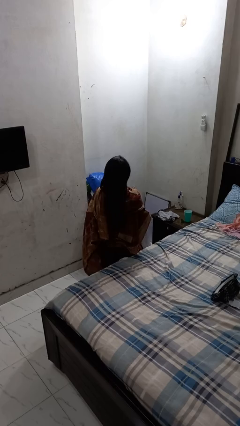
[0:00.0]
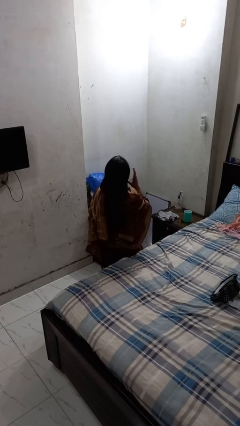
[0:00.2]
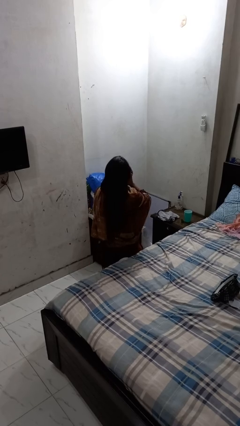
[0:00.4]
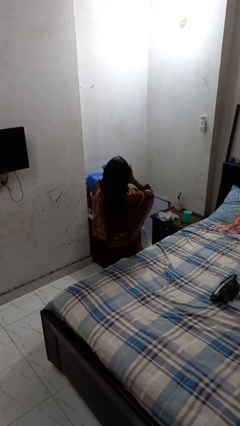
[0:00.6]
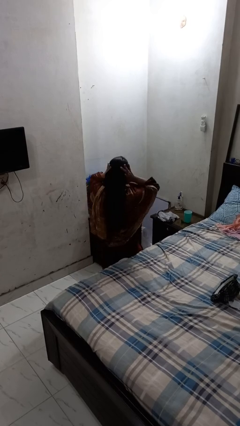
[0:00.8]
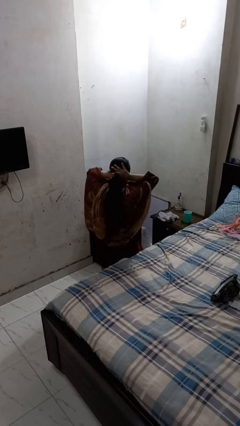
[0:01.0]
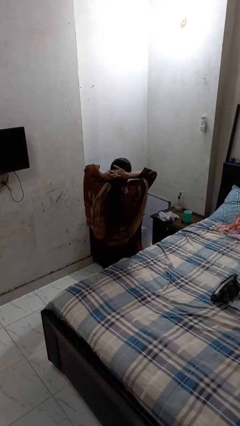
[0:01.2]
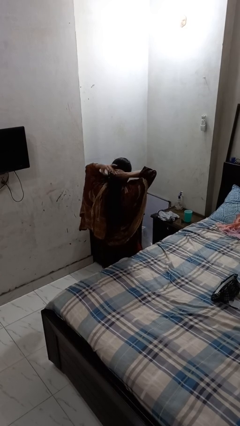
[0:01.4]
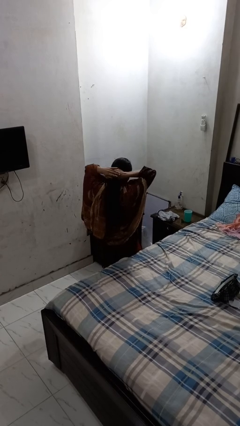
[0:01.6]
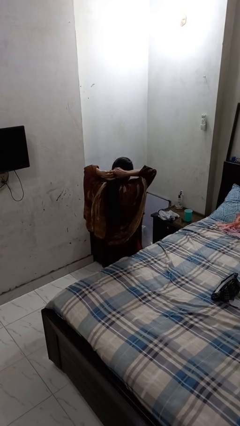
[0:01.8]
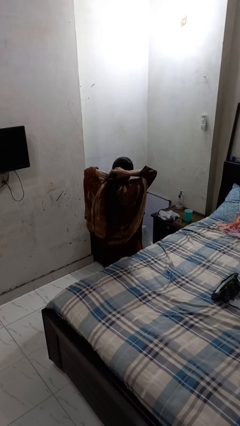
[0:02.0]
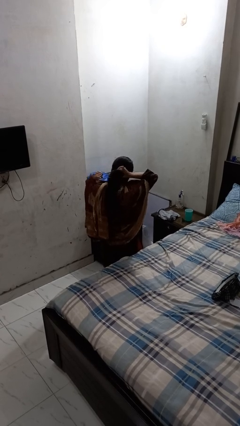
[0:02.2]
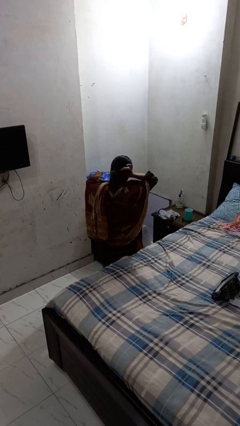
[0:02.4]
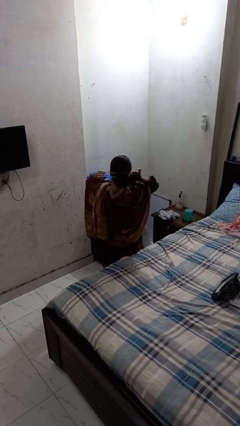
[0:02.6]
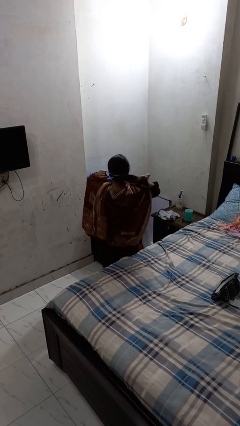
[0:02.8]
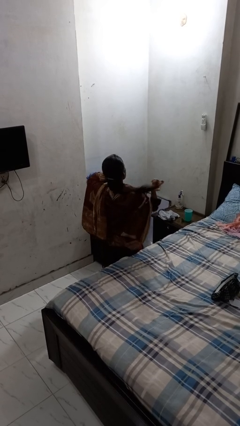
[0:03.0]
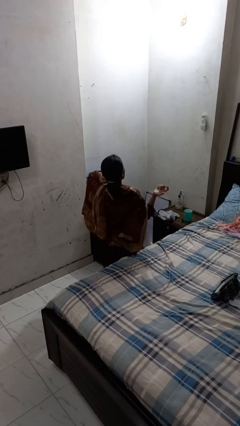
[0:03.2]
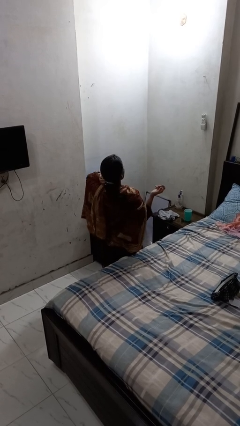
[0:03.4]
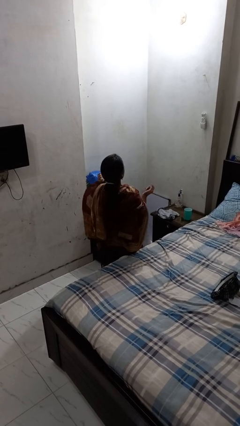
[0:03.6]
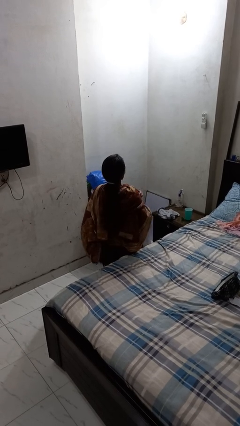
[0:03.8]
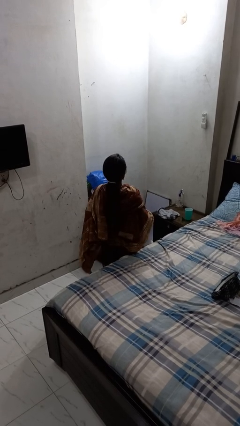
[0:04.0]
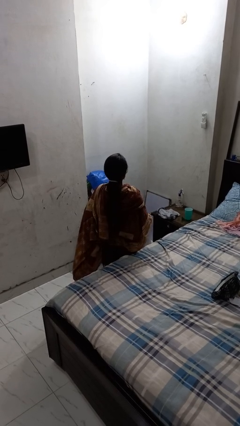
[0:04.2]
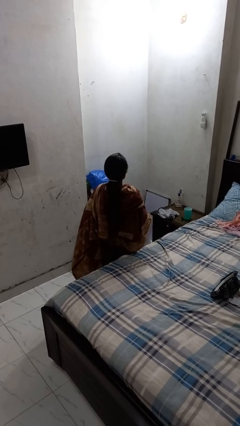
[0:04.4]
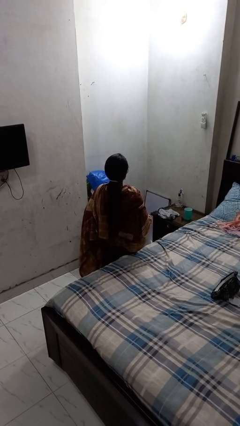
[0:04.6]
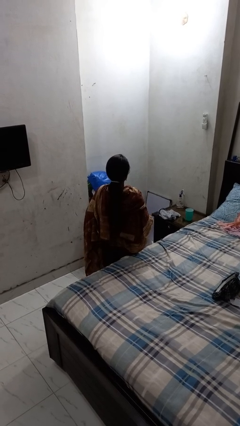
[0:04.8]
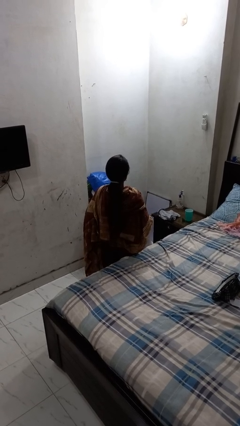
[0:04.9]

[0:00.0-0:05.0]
person puts hair in ponytail

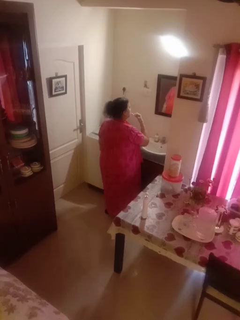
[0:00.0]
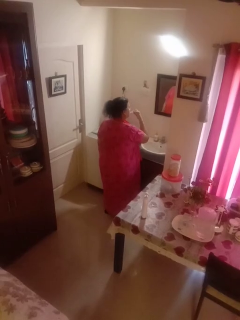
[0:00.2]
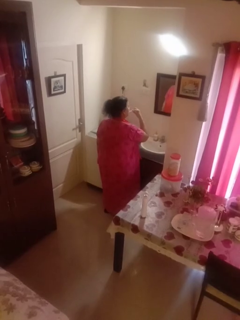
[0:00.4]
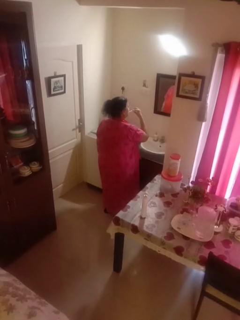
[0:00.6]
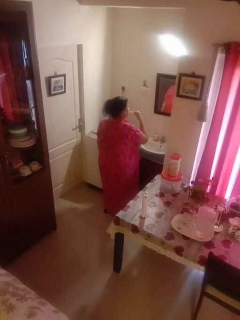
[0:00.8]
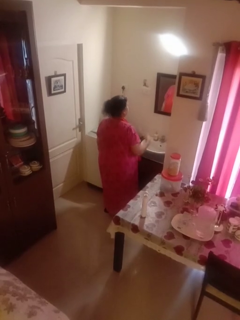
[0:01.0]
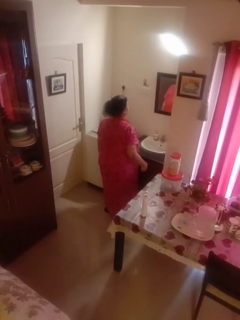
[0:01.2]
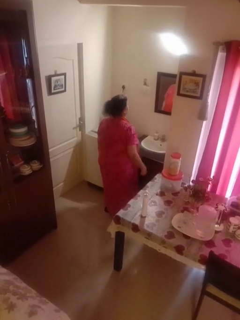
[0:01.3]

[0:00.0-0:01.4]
person brushes teeth

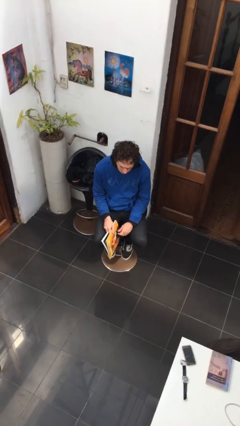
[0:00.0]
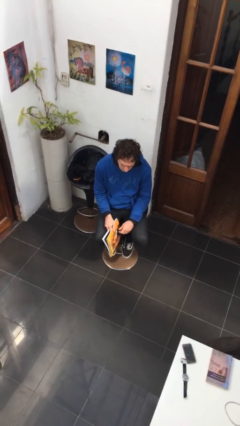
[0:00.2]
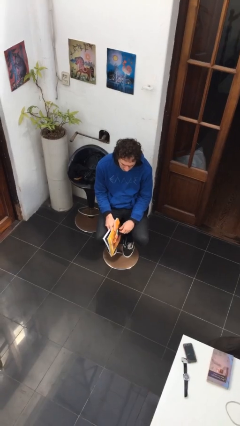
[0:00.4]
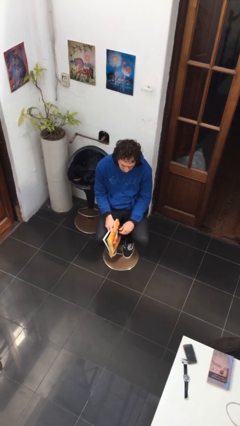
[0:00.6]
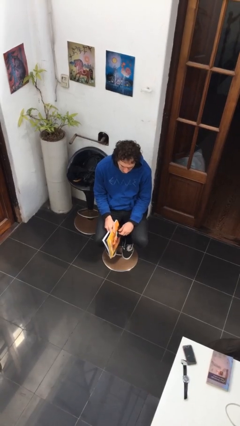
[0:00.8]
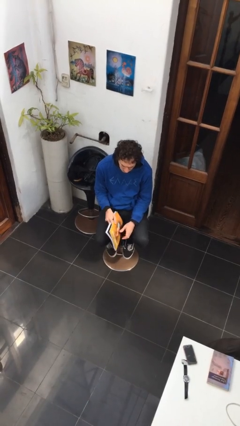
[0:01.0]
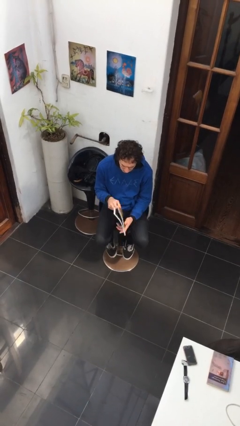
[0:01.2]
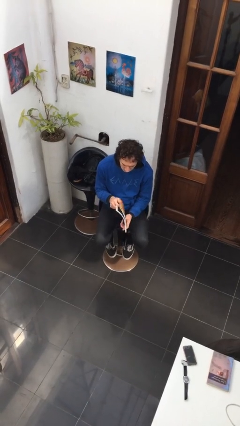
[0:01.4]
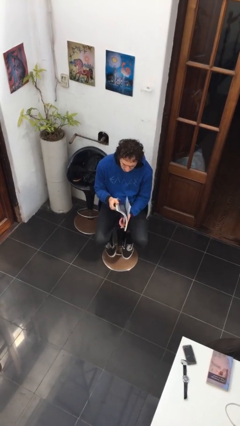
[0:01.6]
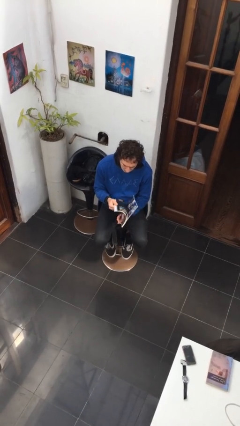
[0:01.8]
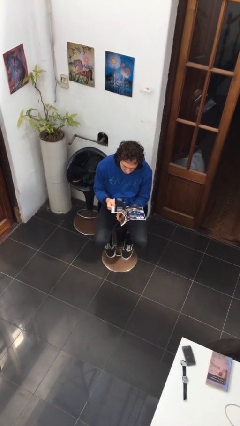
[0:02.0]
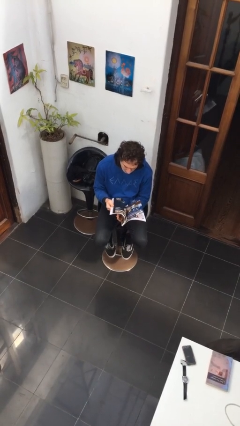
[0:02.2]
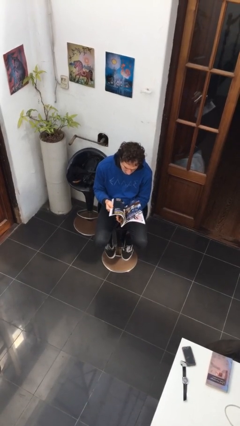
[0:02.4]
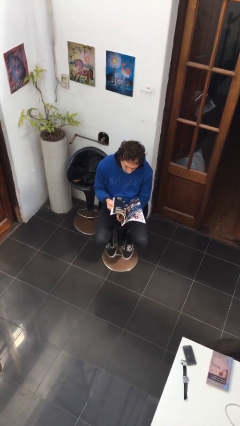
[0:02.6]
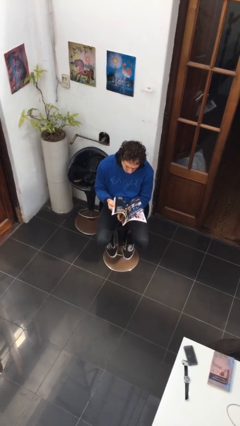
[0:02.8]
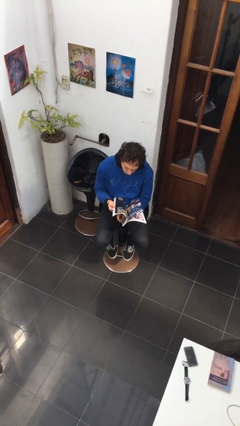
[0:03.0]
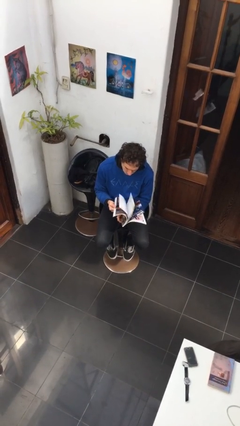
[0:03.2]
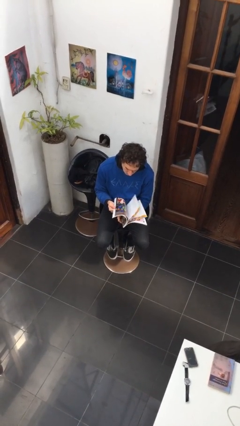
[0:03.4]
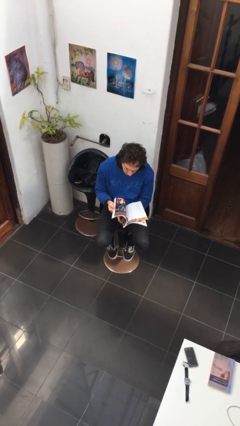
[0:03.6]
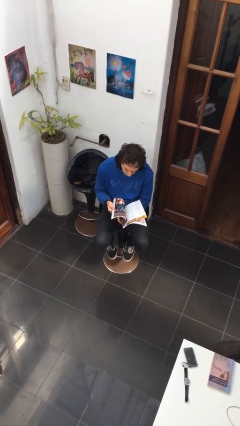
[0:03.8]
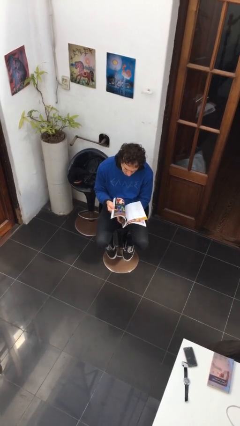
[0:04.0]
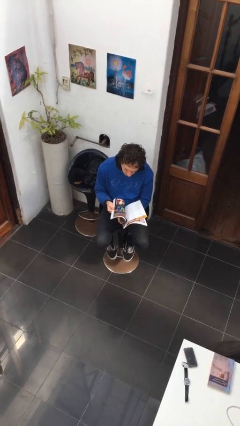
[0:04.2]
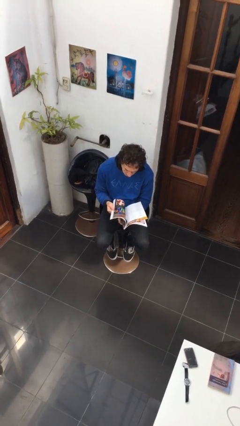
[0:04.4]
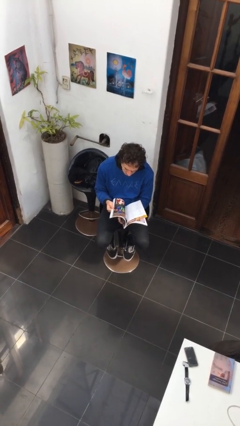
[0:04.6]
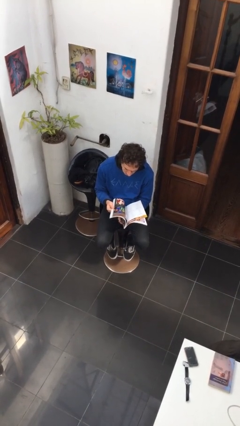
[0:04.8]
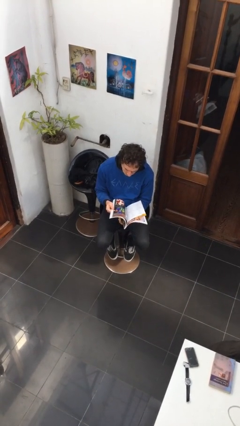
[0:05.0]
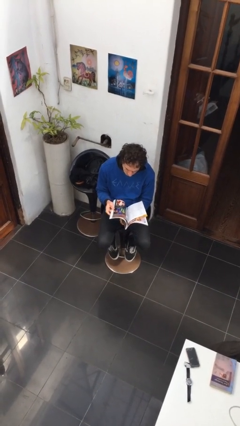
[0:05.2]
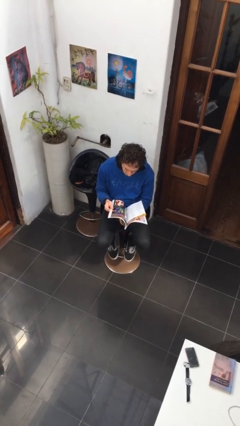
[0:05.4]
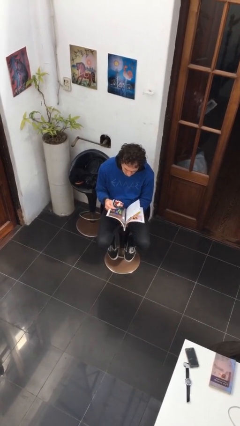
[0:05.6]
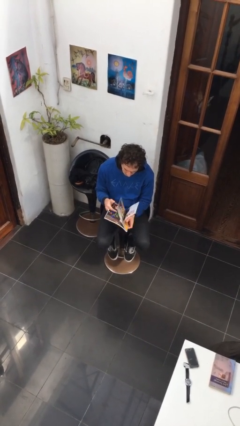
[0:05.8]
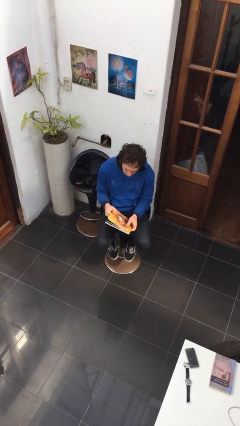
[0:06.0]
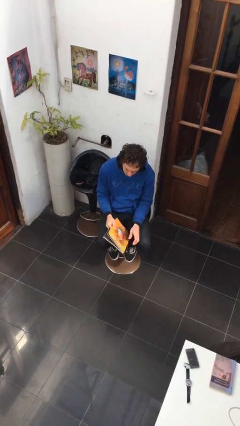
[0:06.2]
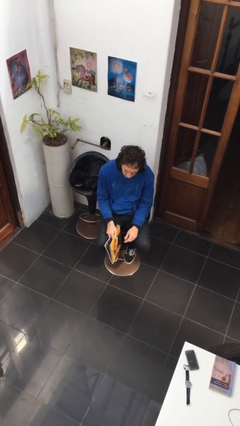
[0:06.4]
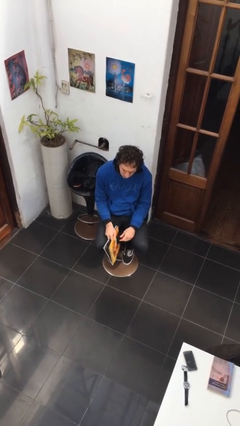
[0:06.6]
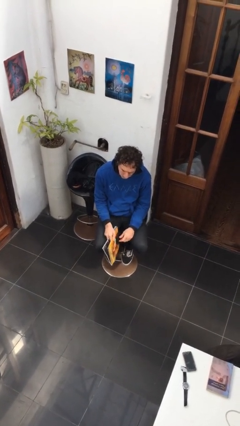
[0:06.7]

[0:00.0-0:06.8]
person reads magazine

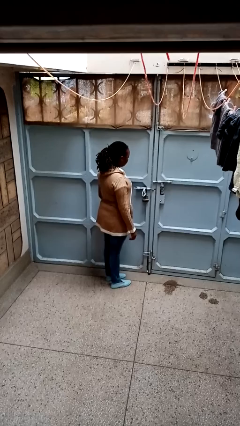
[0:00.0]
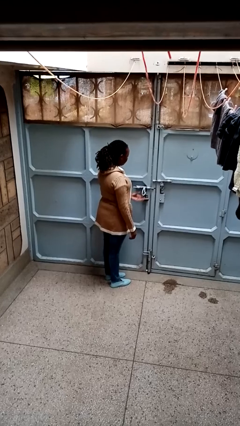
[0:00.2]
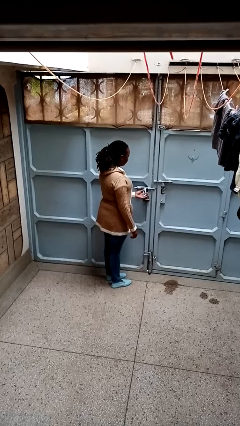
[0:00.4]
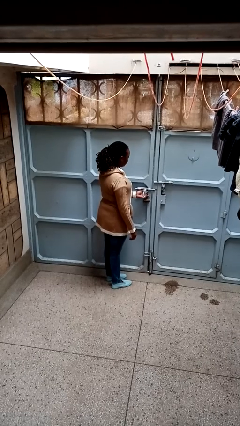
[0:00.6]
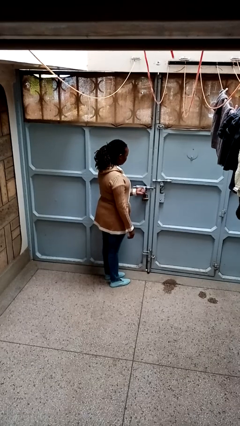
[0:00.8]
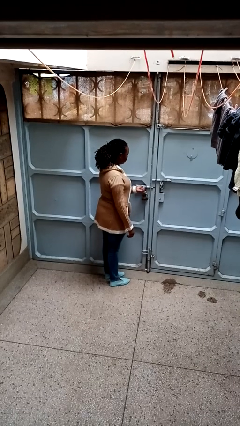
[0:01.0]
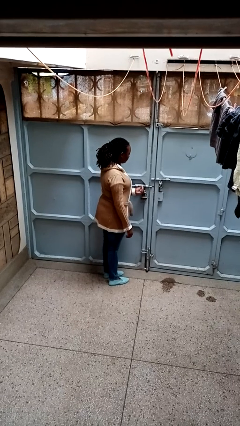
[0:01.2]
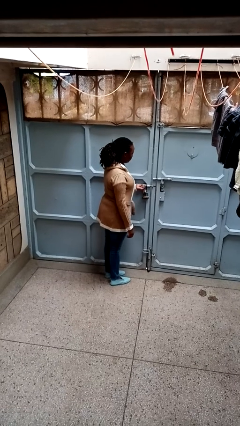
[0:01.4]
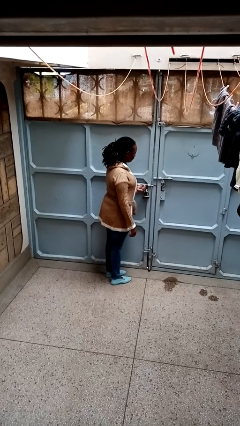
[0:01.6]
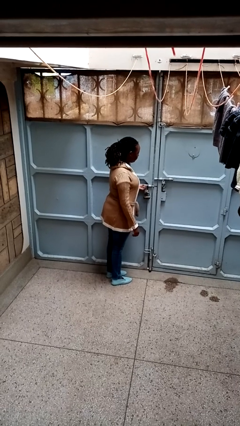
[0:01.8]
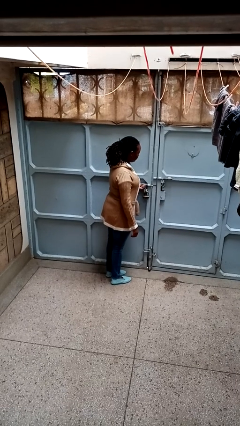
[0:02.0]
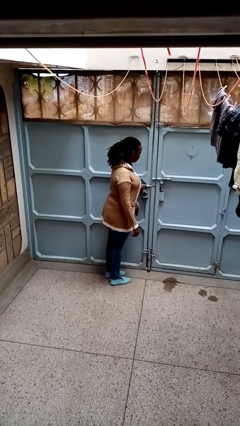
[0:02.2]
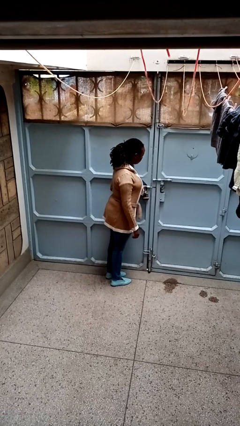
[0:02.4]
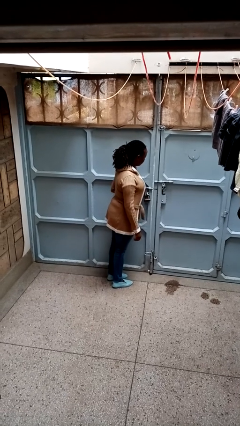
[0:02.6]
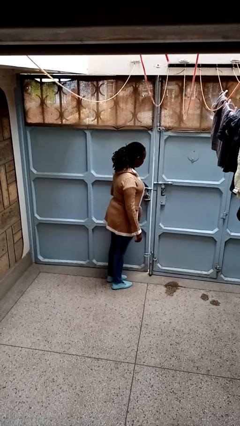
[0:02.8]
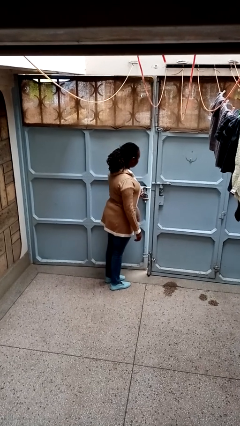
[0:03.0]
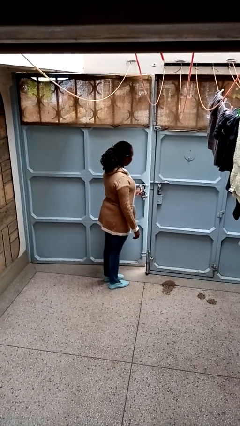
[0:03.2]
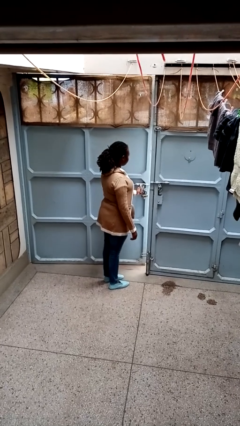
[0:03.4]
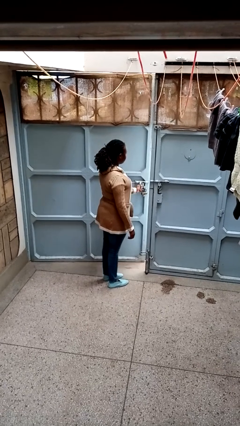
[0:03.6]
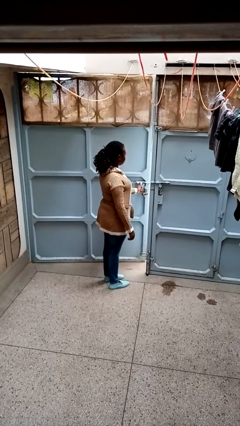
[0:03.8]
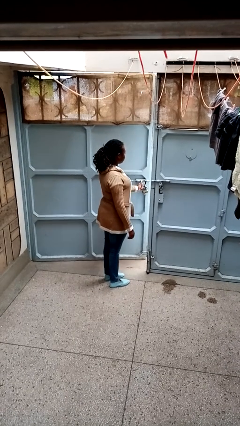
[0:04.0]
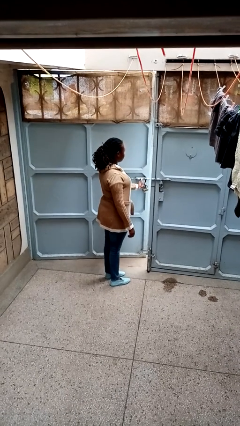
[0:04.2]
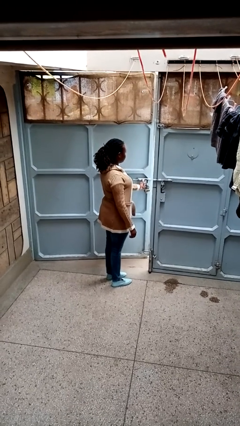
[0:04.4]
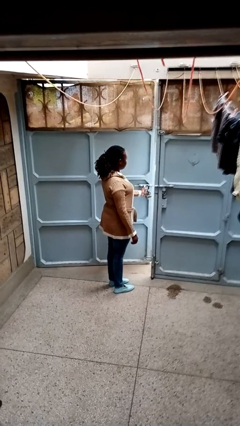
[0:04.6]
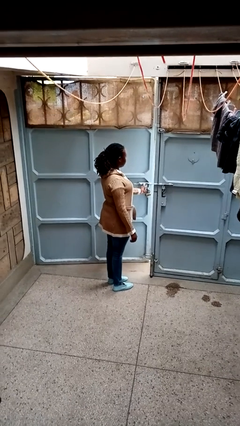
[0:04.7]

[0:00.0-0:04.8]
person opens gate

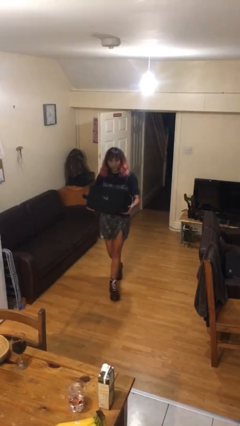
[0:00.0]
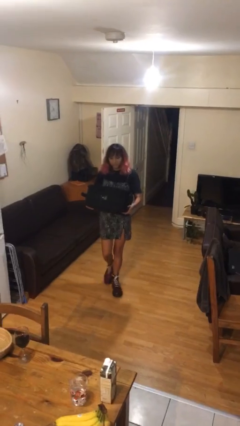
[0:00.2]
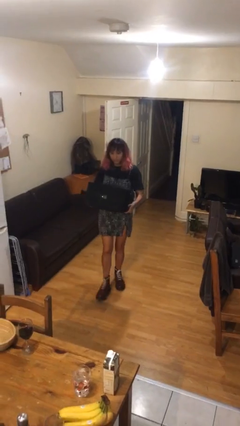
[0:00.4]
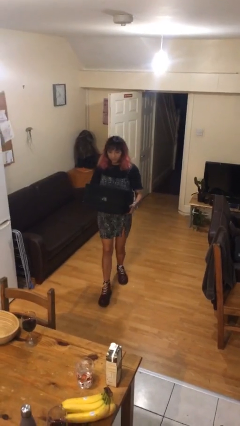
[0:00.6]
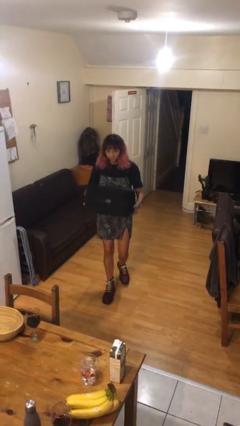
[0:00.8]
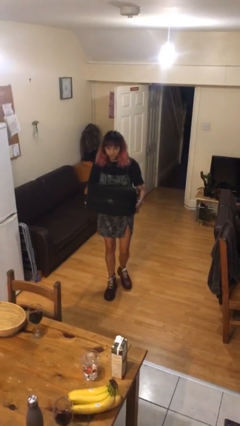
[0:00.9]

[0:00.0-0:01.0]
person puts down object on floor
